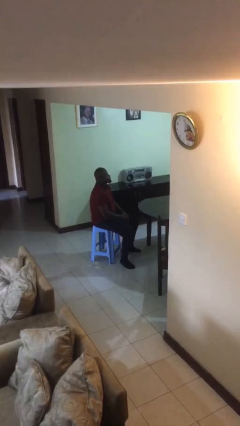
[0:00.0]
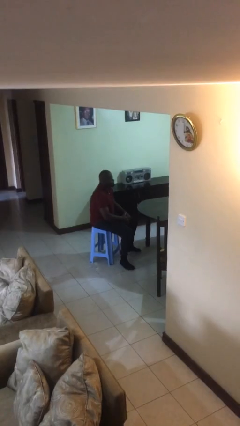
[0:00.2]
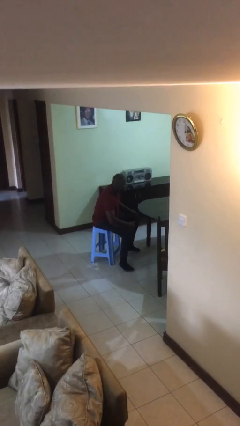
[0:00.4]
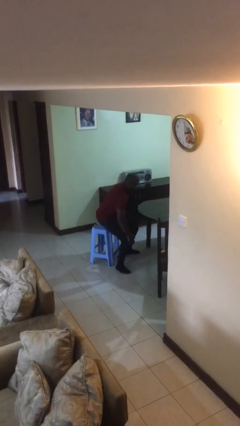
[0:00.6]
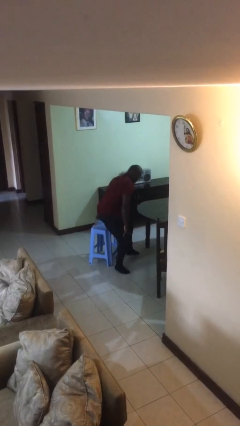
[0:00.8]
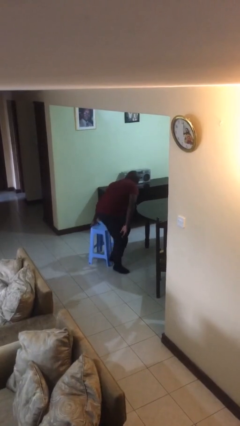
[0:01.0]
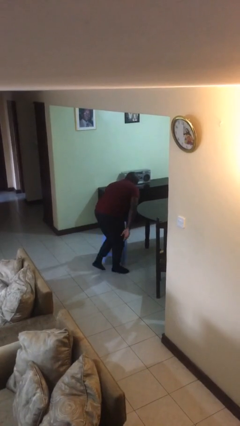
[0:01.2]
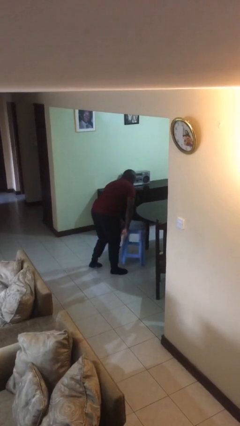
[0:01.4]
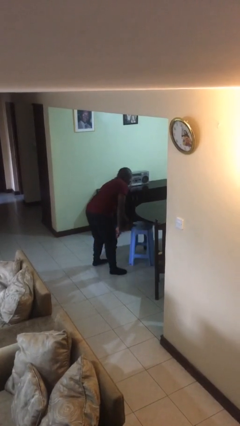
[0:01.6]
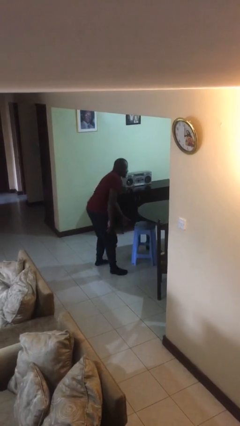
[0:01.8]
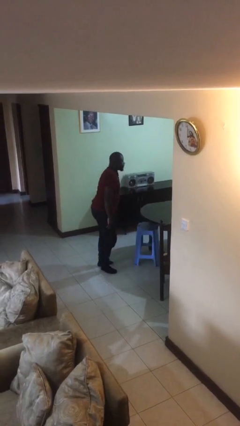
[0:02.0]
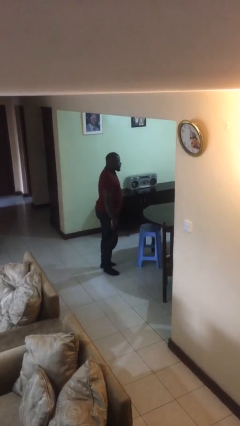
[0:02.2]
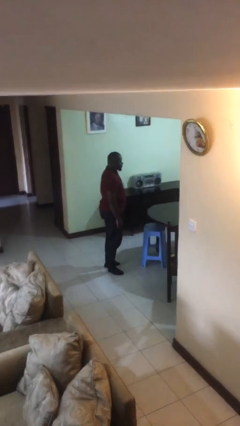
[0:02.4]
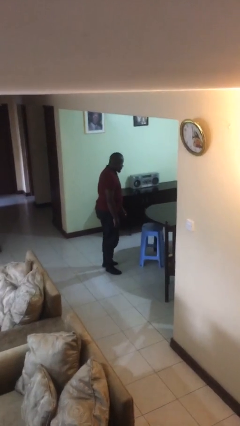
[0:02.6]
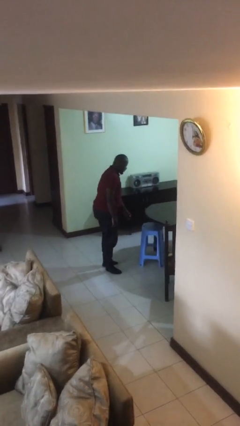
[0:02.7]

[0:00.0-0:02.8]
person stands up

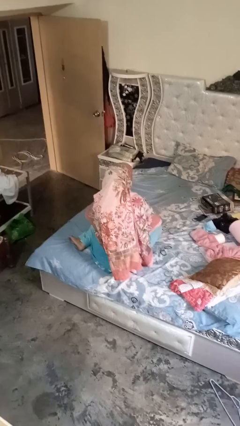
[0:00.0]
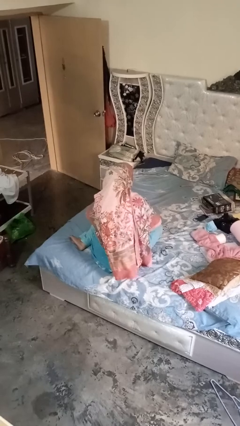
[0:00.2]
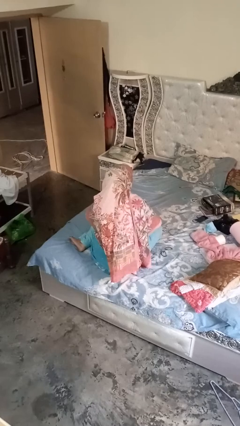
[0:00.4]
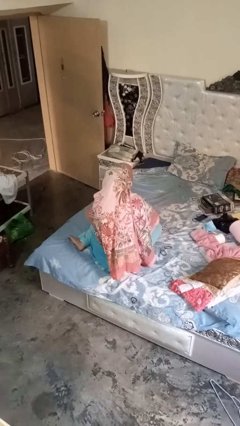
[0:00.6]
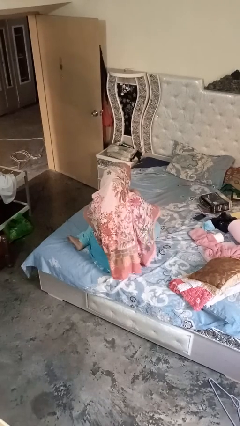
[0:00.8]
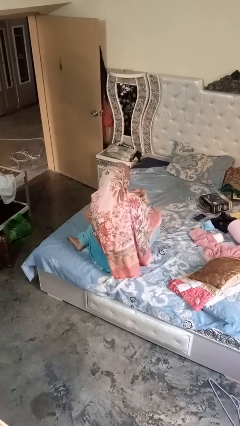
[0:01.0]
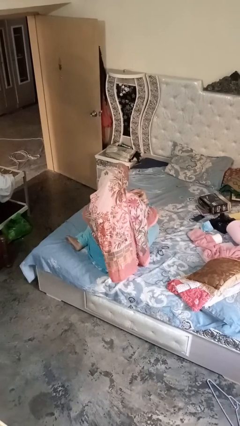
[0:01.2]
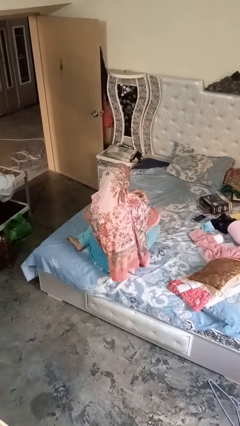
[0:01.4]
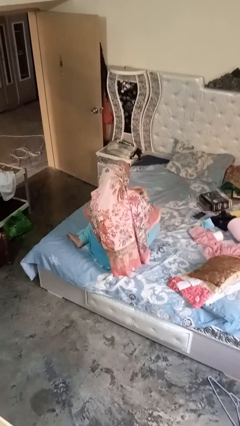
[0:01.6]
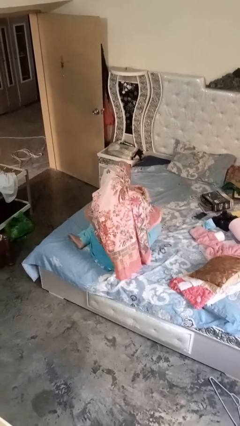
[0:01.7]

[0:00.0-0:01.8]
person gestures cut

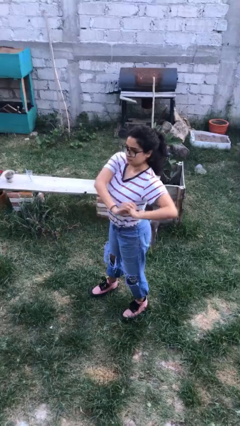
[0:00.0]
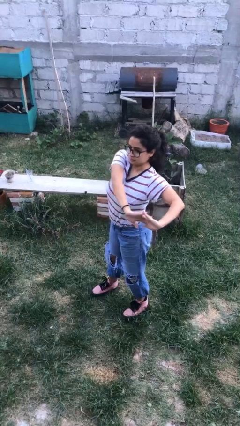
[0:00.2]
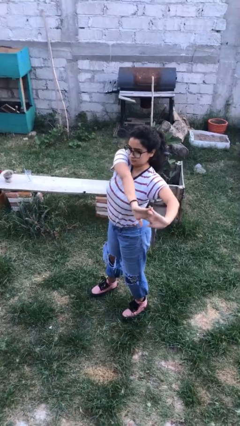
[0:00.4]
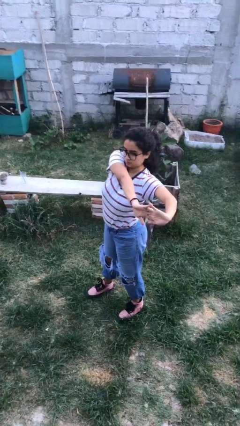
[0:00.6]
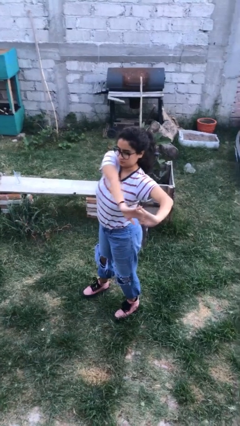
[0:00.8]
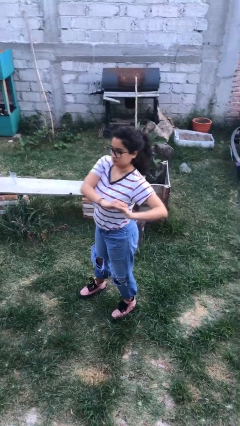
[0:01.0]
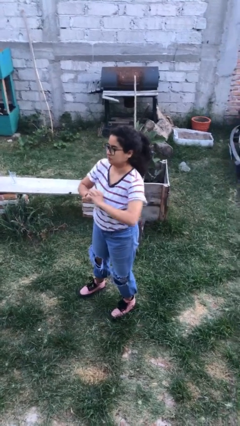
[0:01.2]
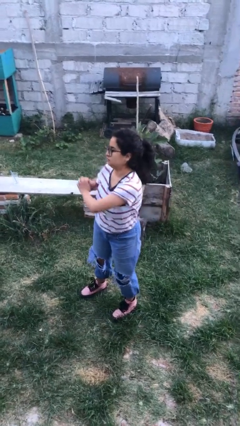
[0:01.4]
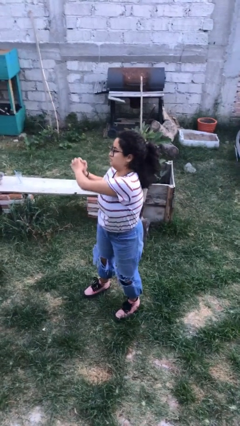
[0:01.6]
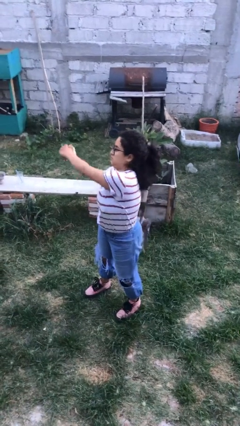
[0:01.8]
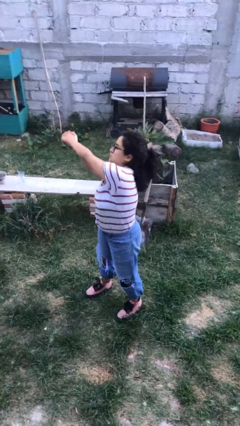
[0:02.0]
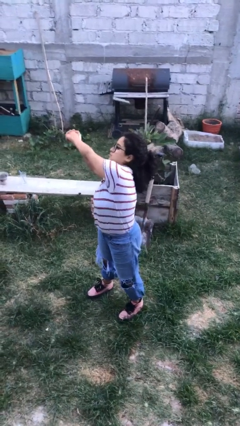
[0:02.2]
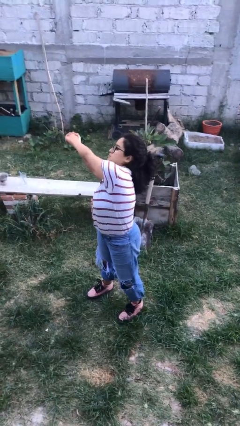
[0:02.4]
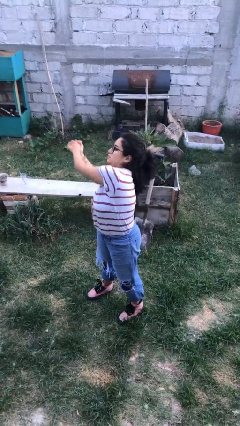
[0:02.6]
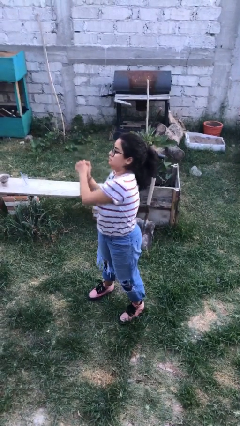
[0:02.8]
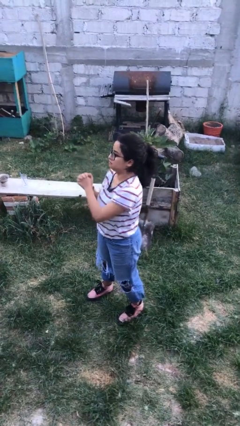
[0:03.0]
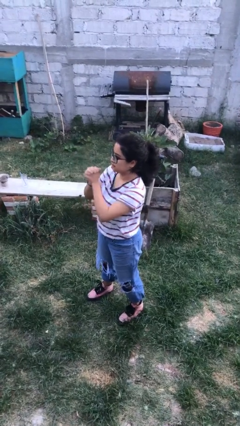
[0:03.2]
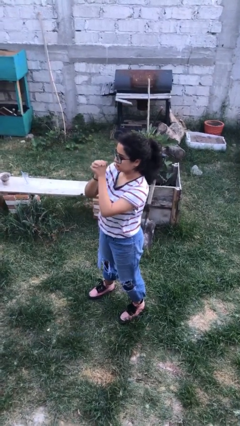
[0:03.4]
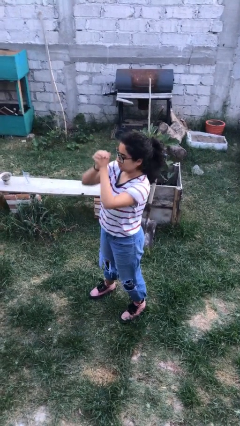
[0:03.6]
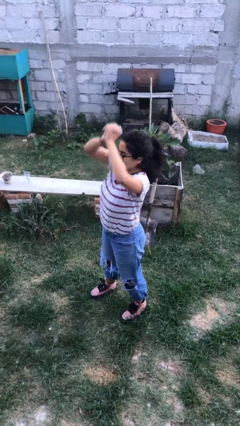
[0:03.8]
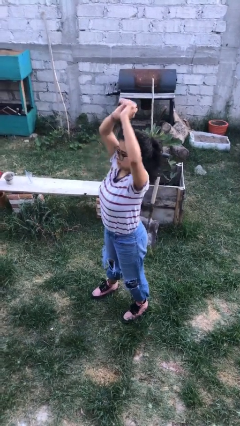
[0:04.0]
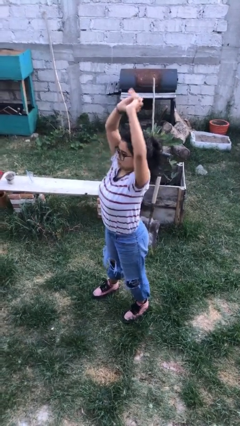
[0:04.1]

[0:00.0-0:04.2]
person stretches arms to side

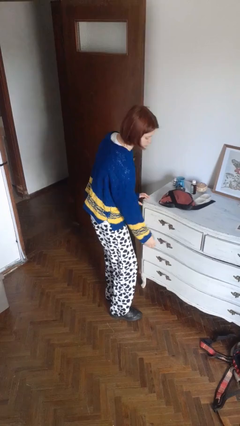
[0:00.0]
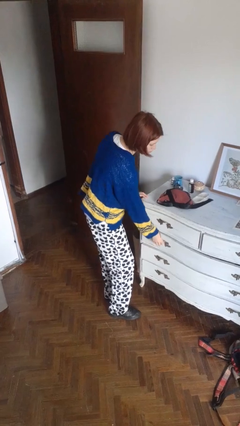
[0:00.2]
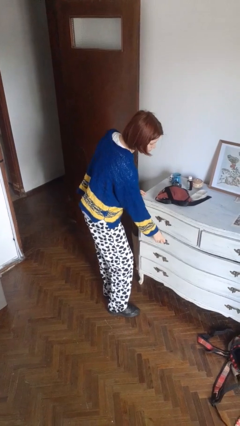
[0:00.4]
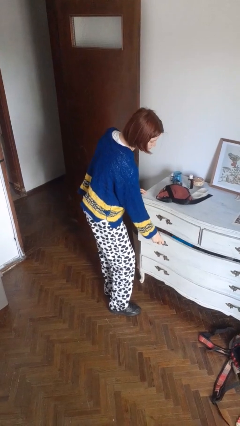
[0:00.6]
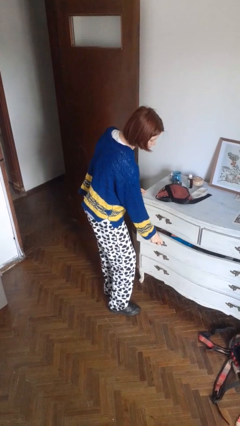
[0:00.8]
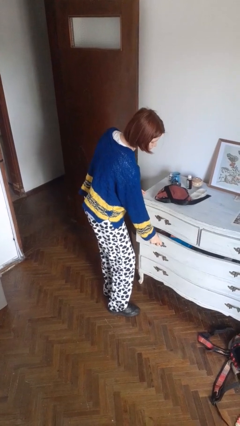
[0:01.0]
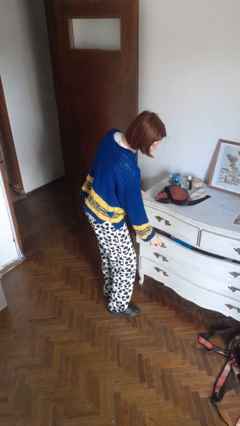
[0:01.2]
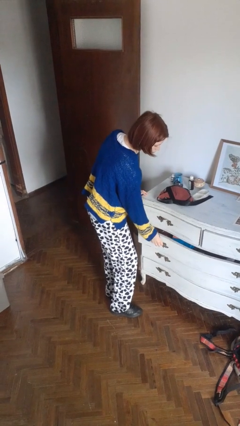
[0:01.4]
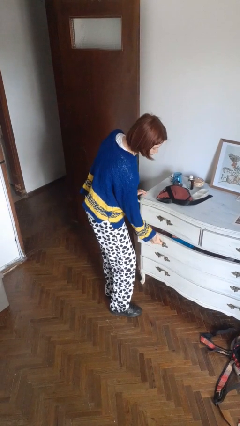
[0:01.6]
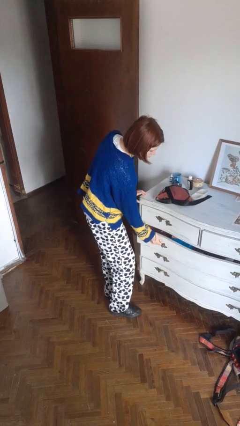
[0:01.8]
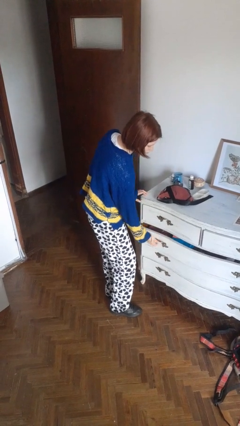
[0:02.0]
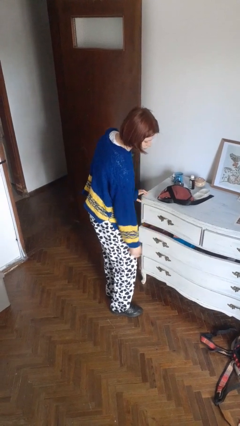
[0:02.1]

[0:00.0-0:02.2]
person opens dresser drawer

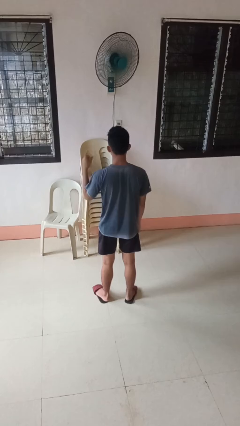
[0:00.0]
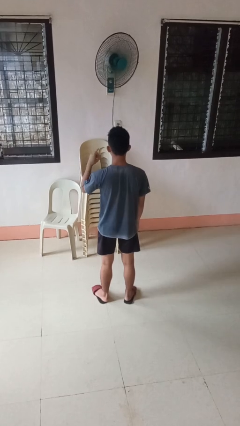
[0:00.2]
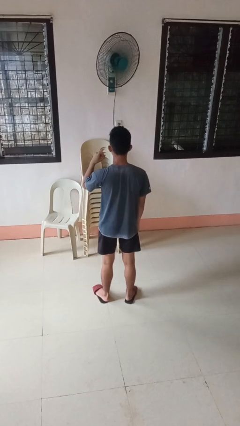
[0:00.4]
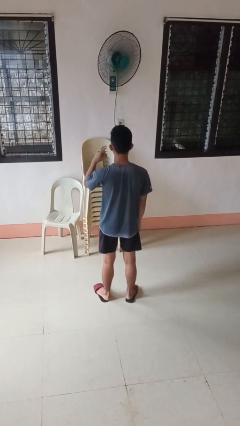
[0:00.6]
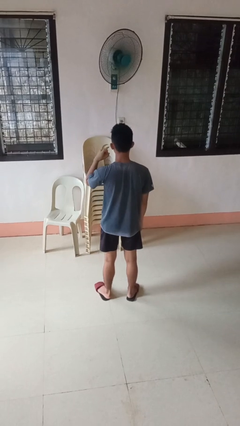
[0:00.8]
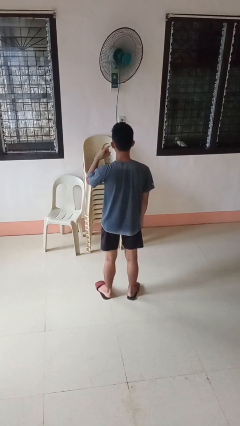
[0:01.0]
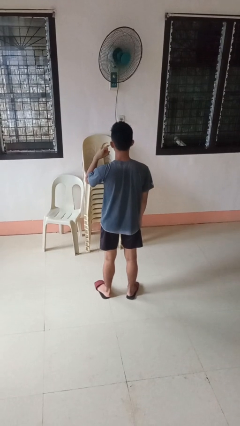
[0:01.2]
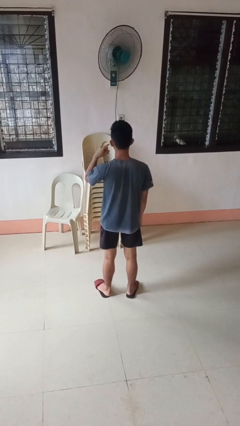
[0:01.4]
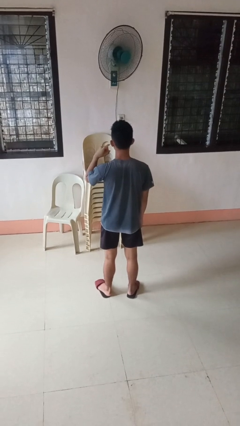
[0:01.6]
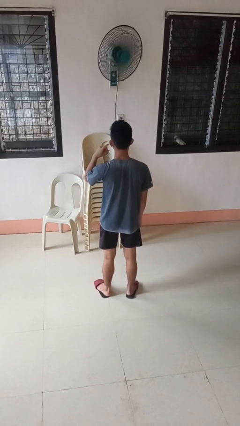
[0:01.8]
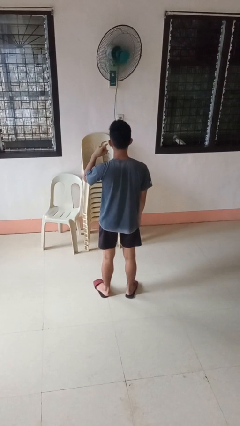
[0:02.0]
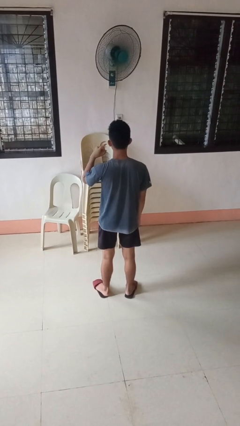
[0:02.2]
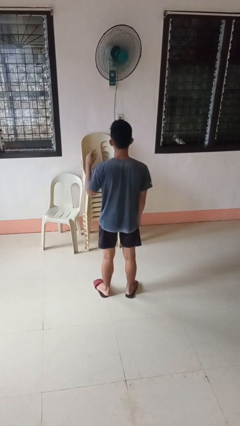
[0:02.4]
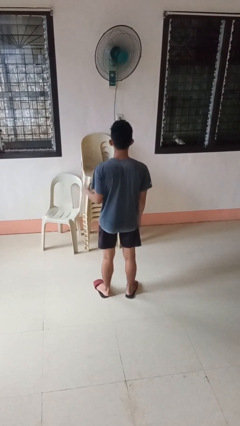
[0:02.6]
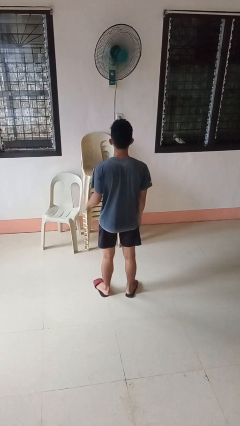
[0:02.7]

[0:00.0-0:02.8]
person gestures listen closely

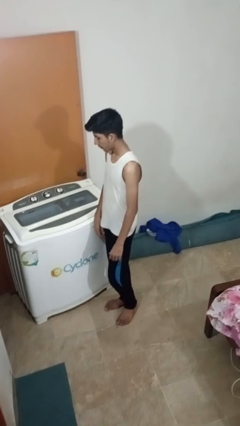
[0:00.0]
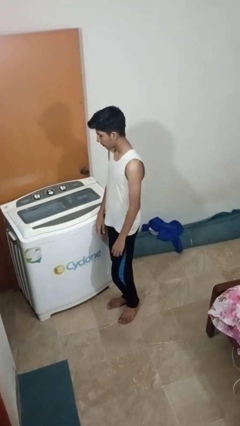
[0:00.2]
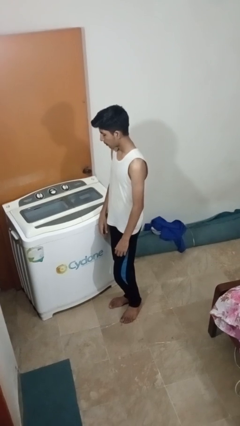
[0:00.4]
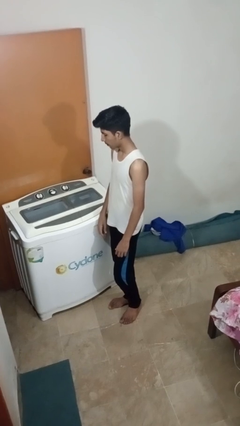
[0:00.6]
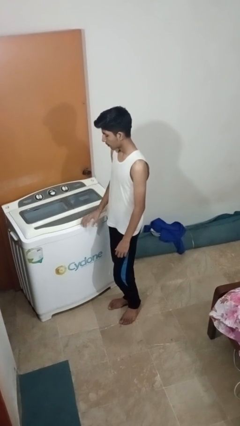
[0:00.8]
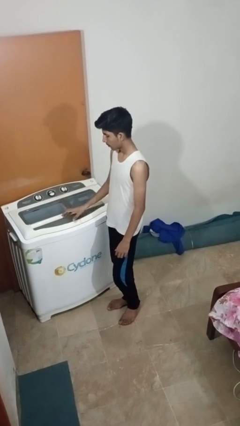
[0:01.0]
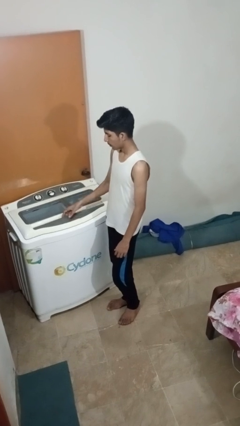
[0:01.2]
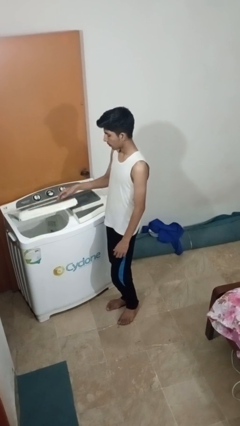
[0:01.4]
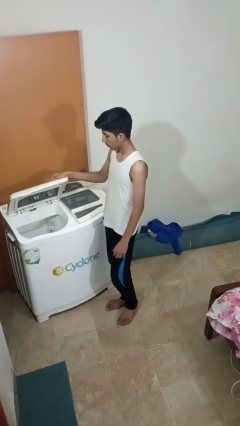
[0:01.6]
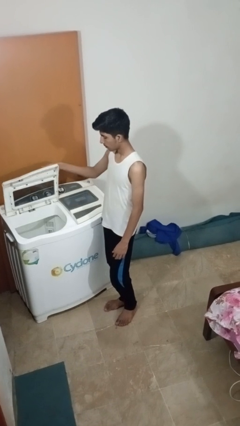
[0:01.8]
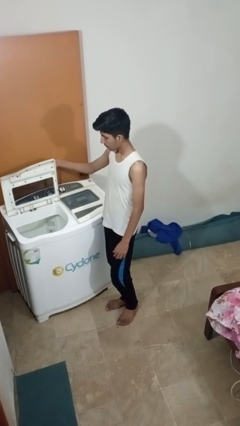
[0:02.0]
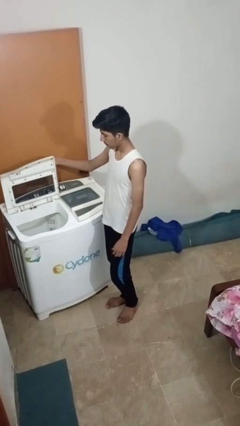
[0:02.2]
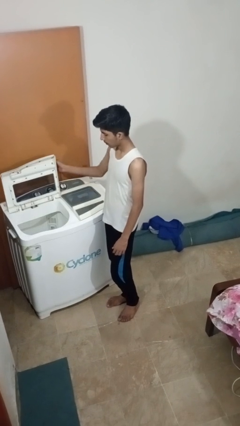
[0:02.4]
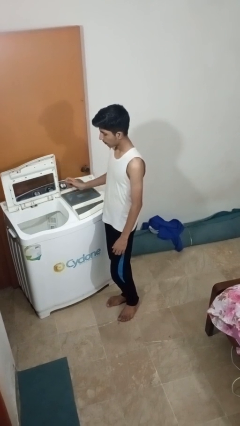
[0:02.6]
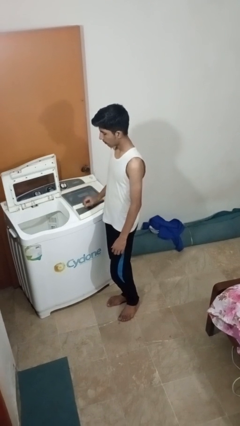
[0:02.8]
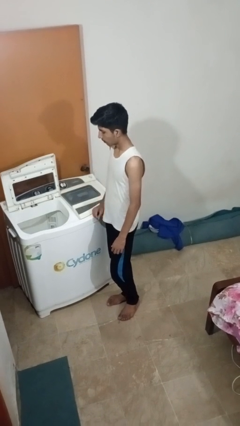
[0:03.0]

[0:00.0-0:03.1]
person opens clothes washer
